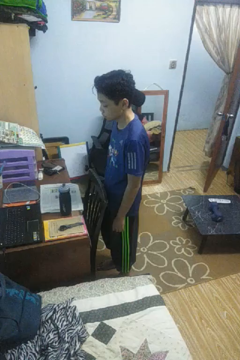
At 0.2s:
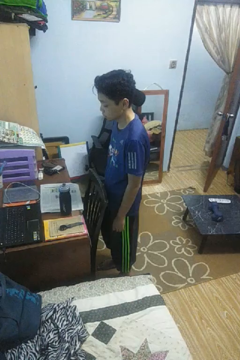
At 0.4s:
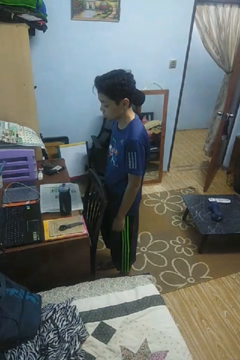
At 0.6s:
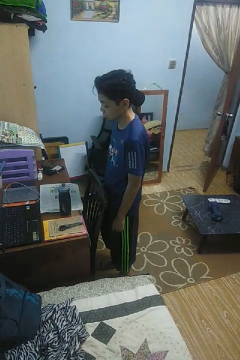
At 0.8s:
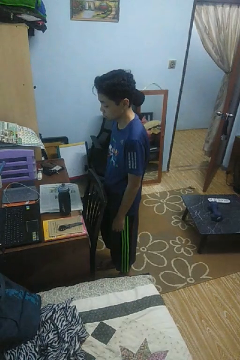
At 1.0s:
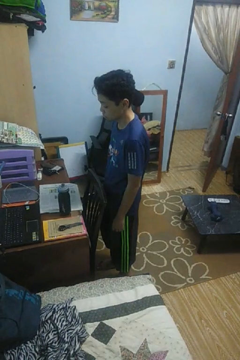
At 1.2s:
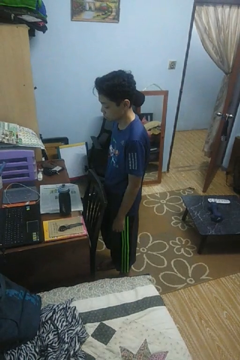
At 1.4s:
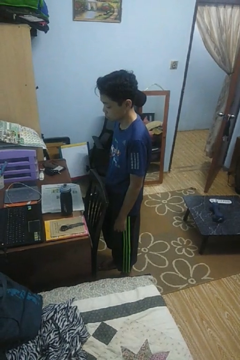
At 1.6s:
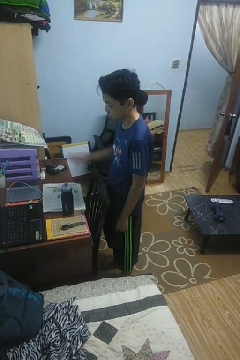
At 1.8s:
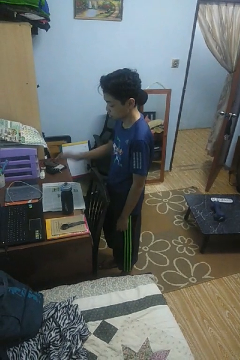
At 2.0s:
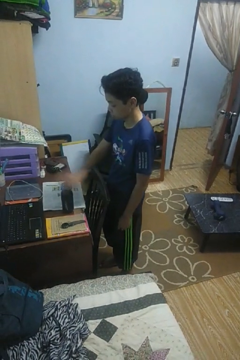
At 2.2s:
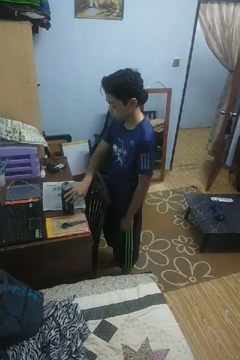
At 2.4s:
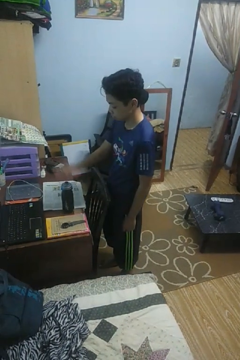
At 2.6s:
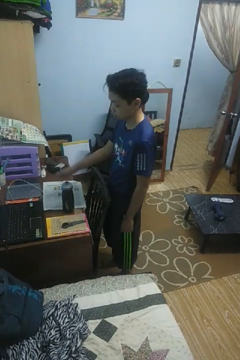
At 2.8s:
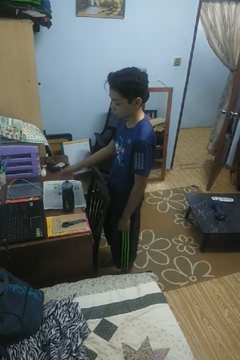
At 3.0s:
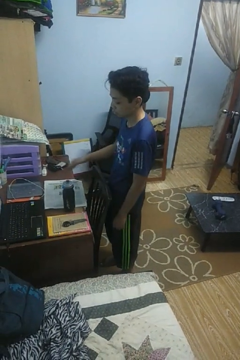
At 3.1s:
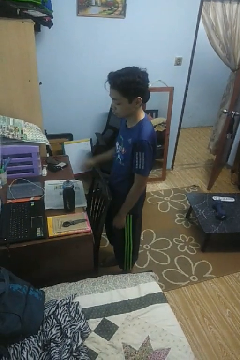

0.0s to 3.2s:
person waves hand over object

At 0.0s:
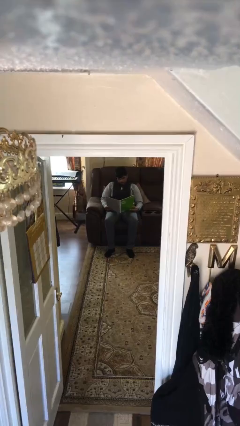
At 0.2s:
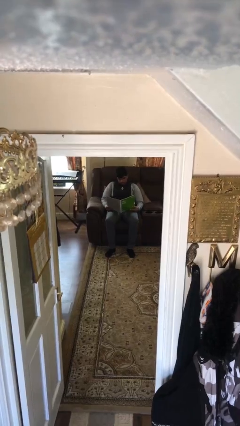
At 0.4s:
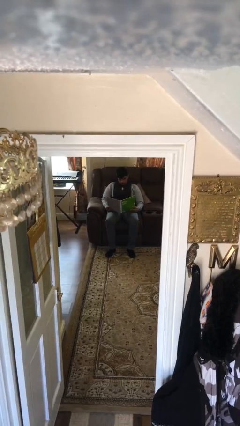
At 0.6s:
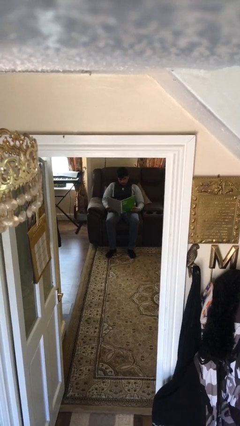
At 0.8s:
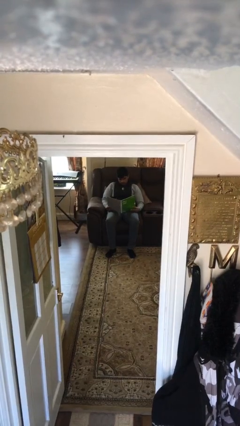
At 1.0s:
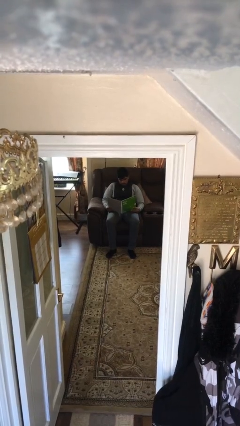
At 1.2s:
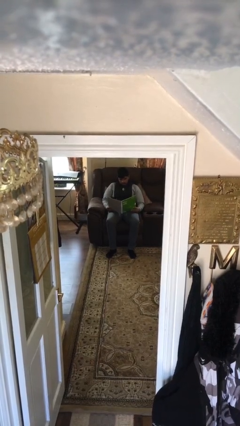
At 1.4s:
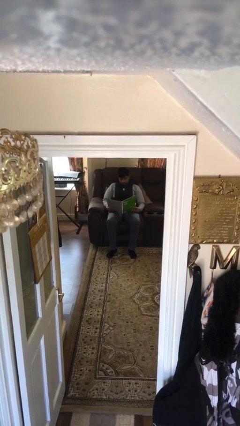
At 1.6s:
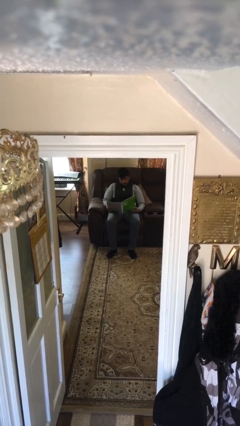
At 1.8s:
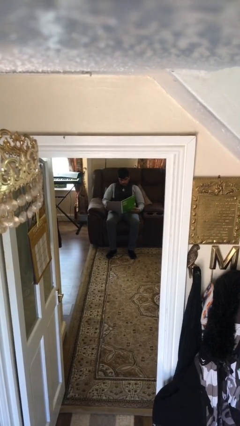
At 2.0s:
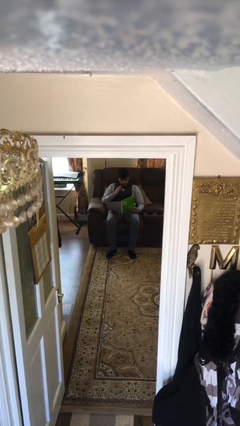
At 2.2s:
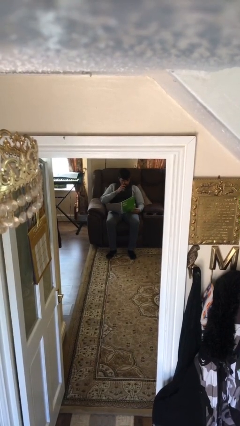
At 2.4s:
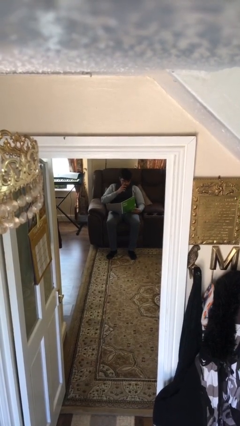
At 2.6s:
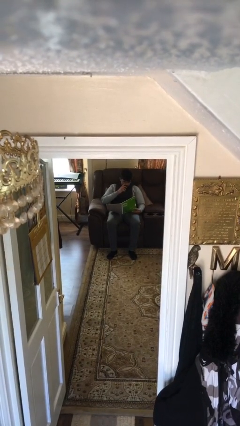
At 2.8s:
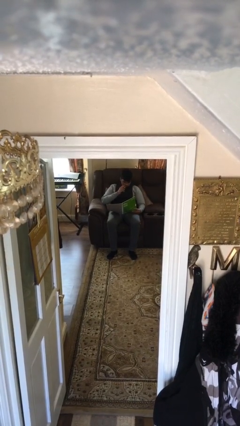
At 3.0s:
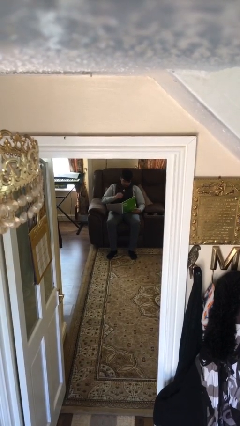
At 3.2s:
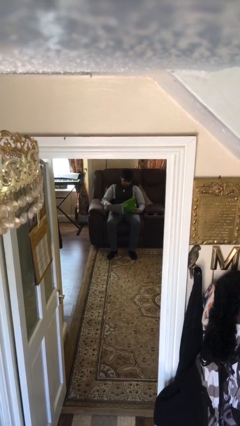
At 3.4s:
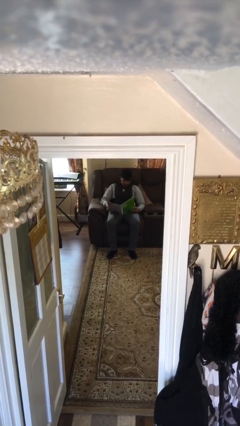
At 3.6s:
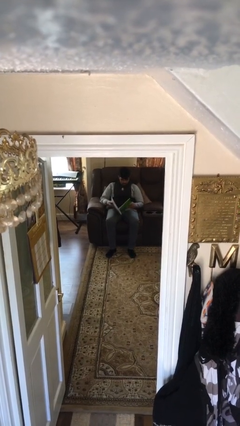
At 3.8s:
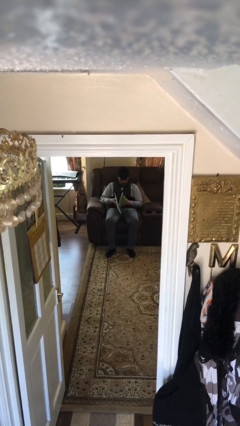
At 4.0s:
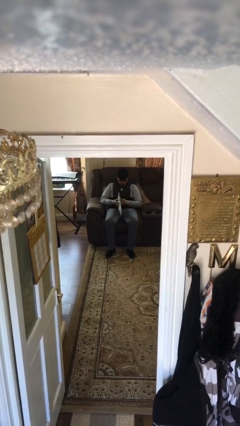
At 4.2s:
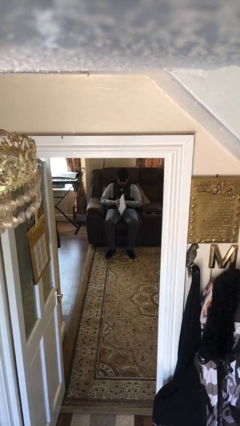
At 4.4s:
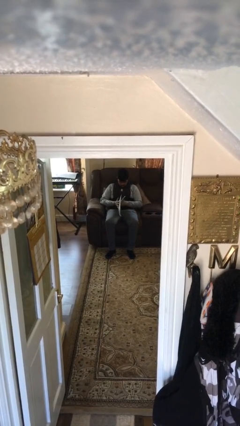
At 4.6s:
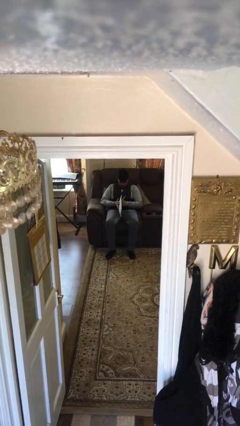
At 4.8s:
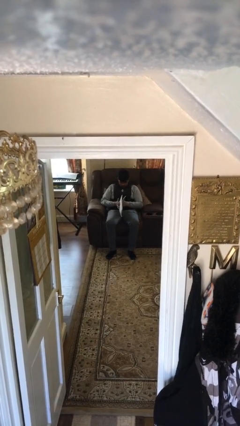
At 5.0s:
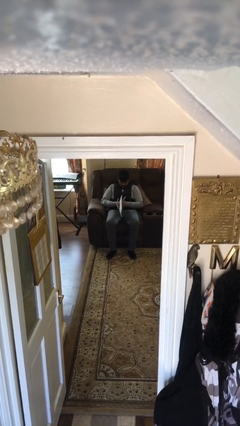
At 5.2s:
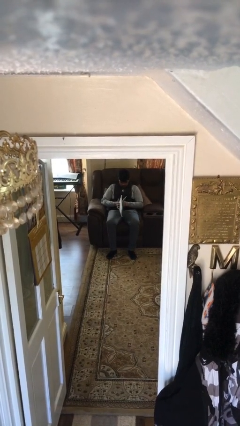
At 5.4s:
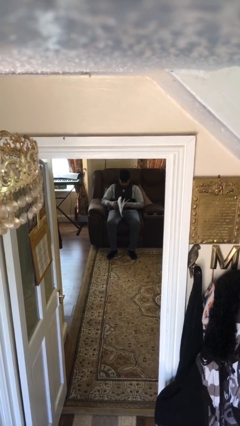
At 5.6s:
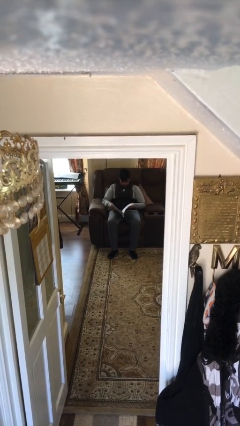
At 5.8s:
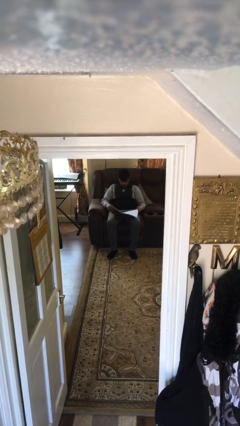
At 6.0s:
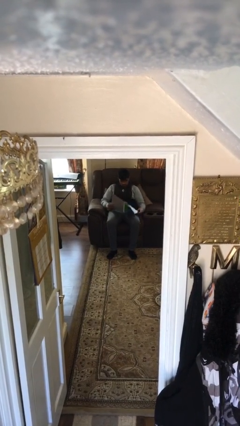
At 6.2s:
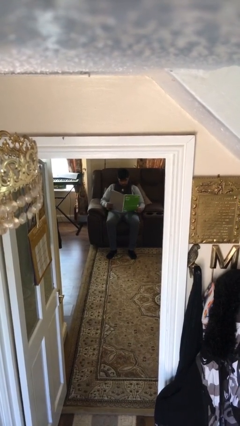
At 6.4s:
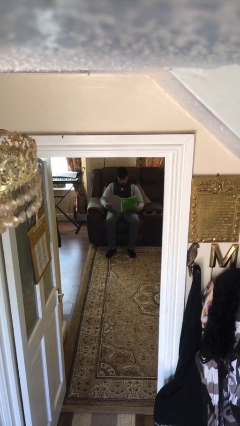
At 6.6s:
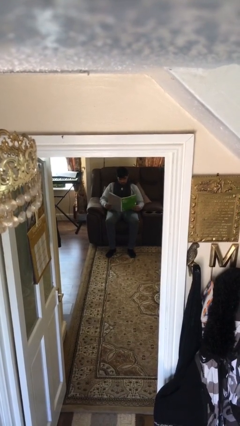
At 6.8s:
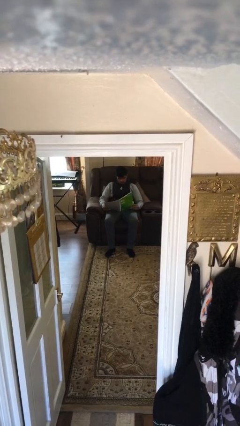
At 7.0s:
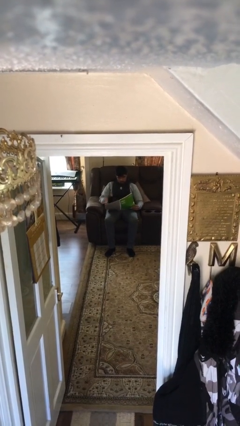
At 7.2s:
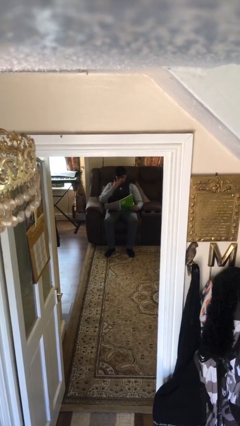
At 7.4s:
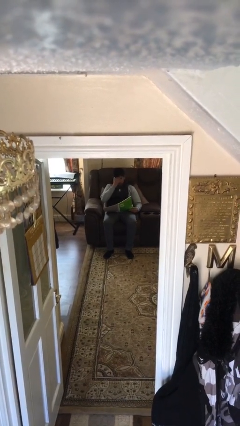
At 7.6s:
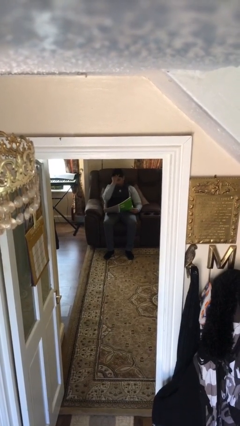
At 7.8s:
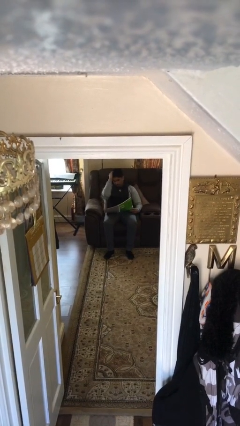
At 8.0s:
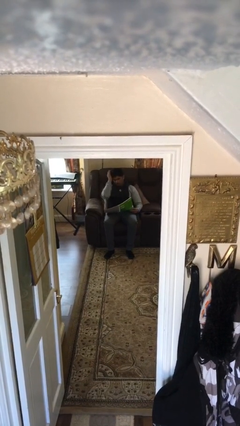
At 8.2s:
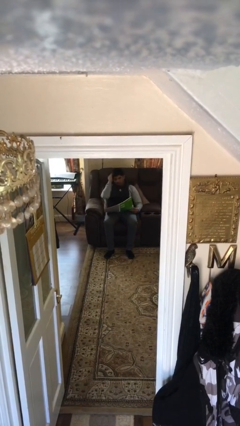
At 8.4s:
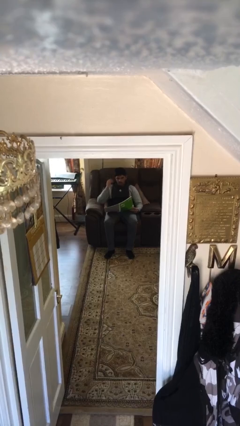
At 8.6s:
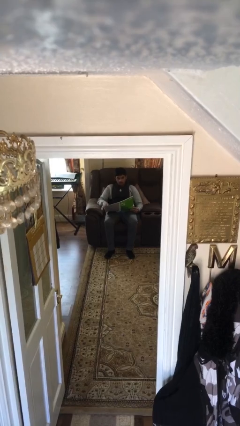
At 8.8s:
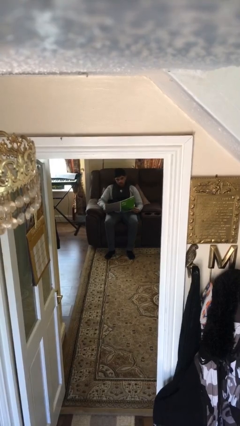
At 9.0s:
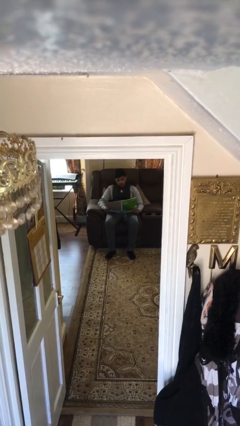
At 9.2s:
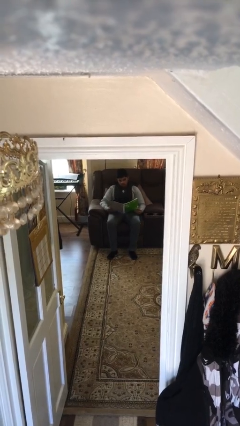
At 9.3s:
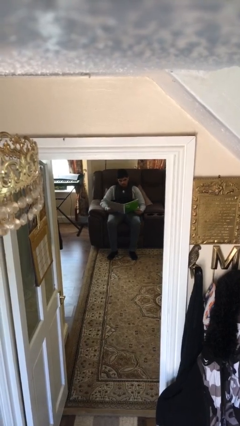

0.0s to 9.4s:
person reads document

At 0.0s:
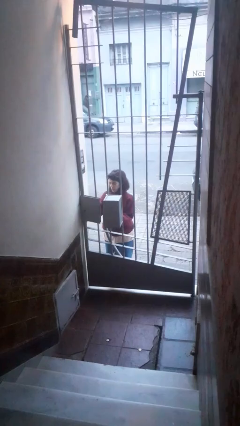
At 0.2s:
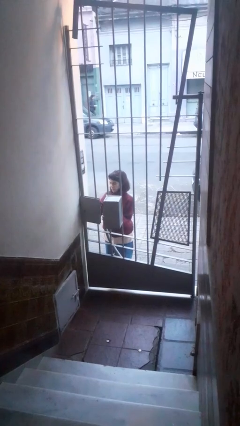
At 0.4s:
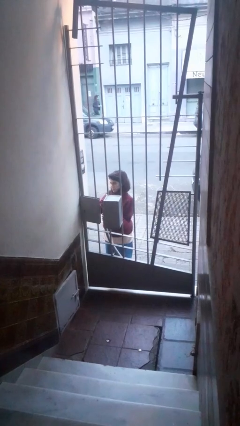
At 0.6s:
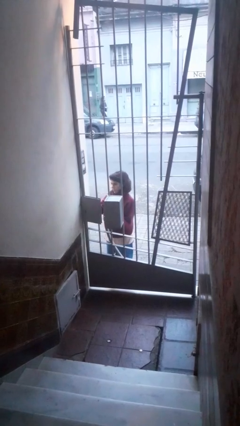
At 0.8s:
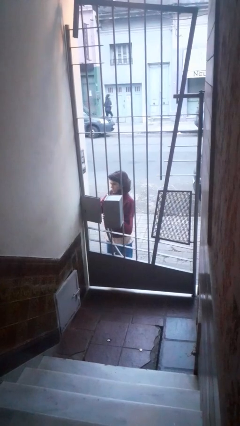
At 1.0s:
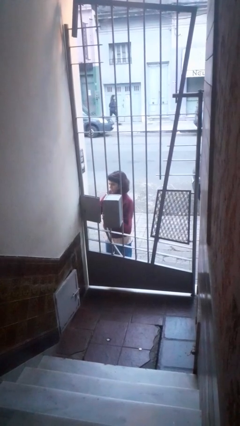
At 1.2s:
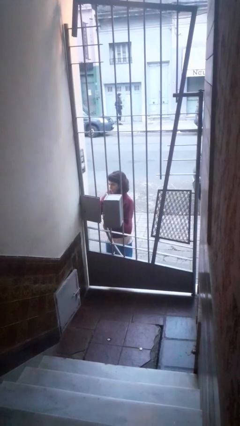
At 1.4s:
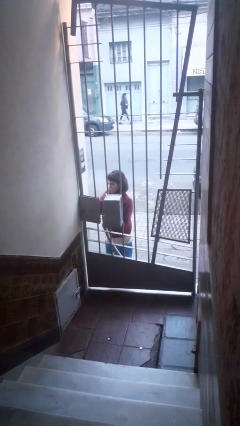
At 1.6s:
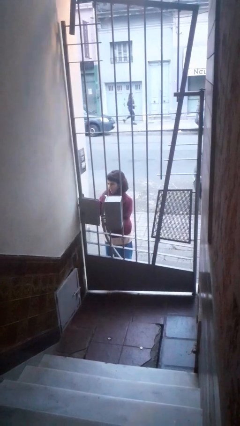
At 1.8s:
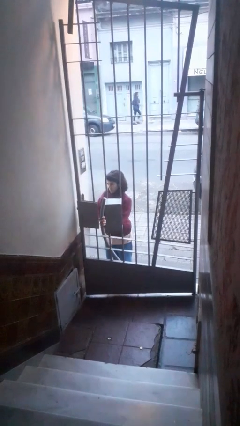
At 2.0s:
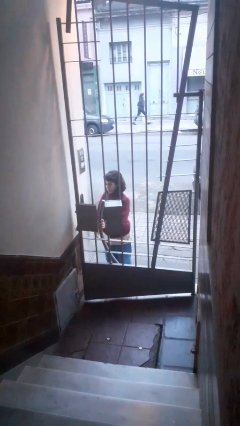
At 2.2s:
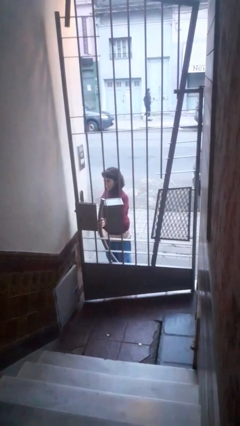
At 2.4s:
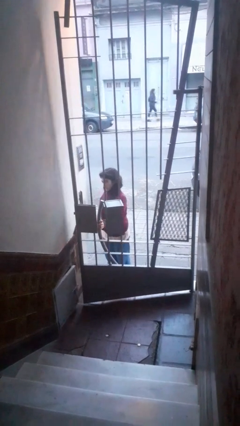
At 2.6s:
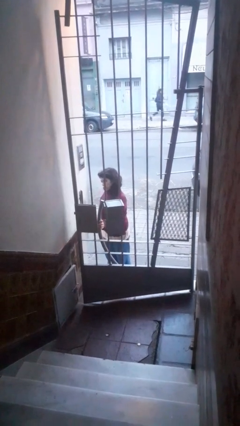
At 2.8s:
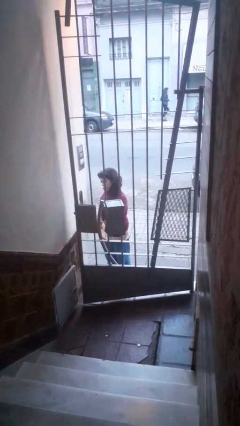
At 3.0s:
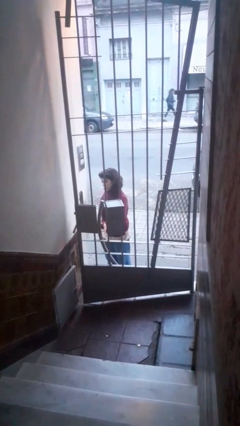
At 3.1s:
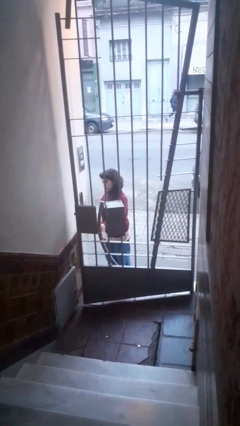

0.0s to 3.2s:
person opens gate

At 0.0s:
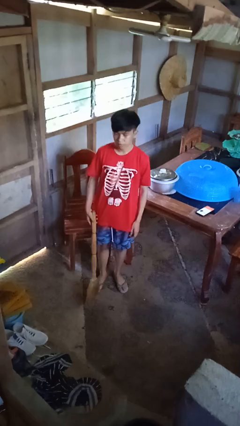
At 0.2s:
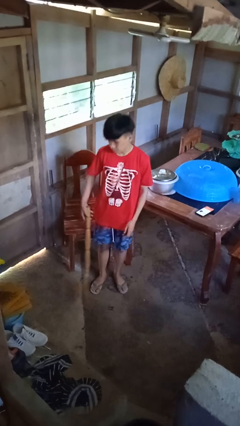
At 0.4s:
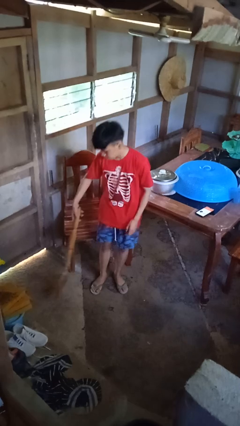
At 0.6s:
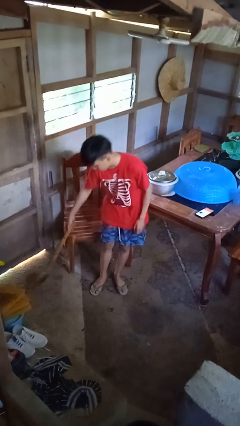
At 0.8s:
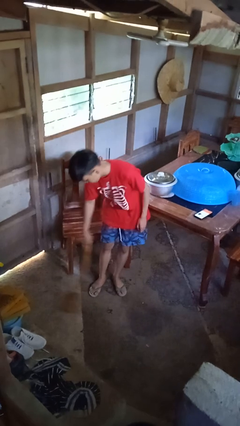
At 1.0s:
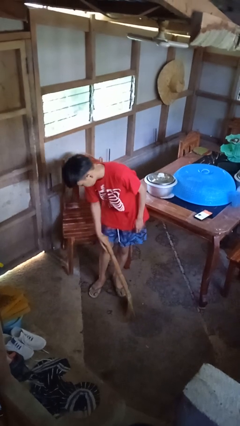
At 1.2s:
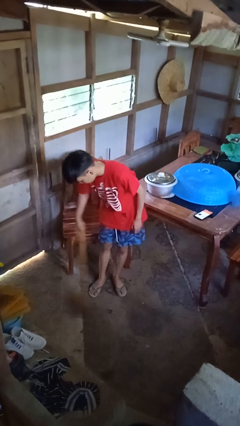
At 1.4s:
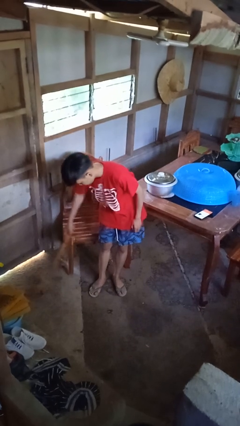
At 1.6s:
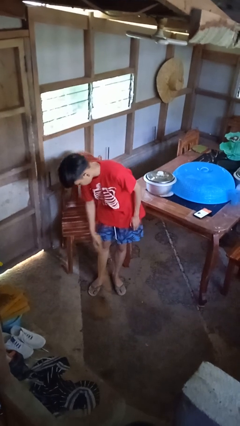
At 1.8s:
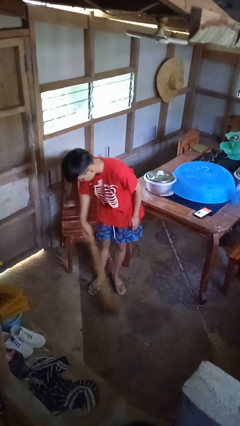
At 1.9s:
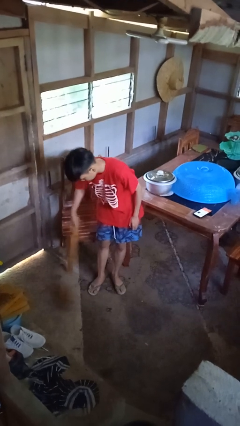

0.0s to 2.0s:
person sweeps floor

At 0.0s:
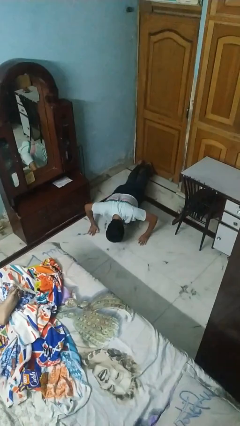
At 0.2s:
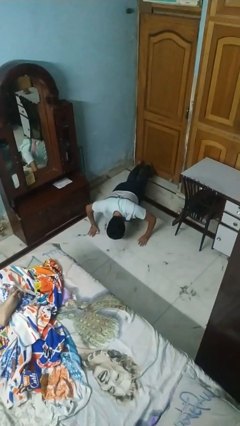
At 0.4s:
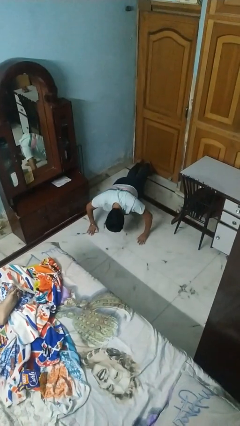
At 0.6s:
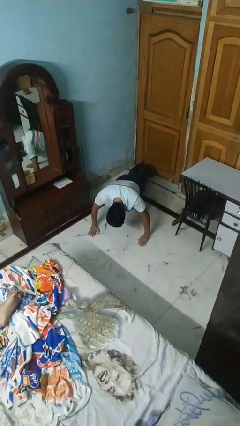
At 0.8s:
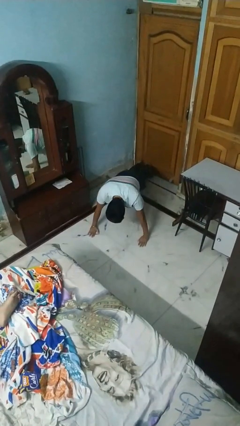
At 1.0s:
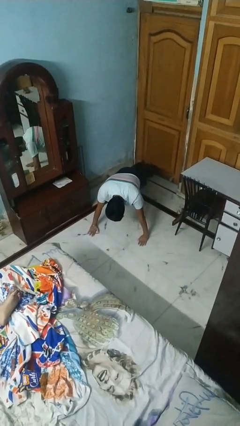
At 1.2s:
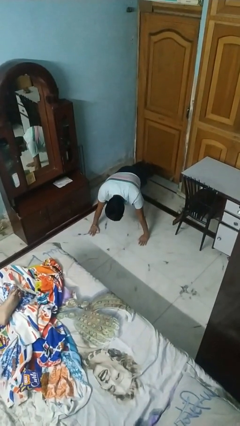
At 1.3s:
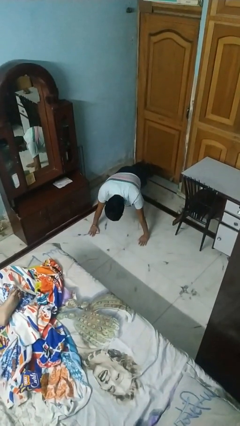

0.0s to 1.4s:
person exercises with pushup
